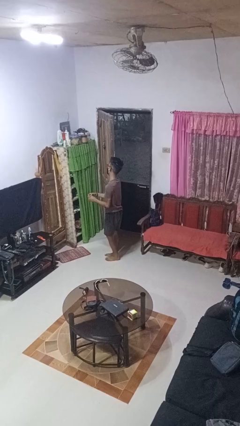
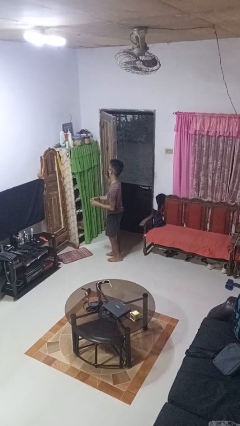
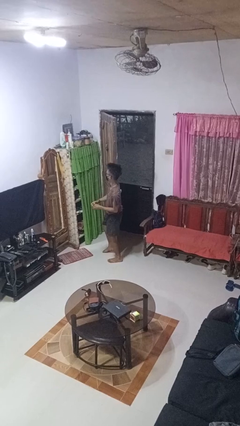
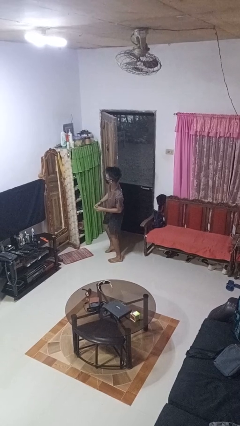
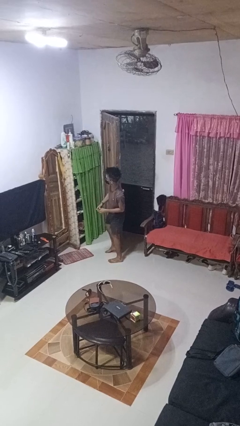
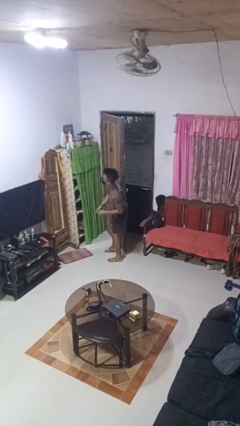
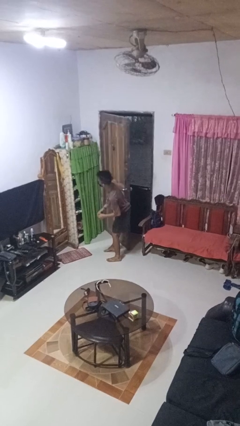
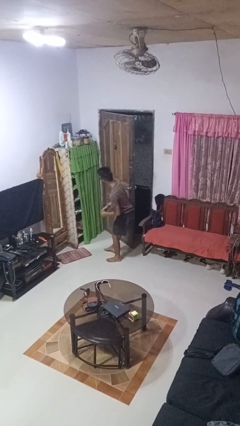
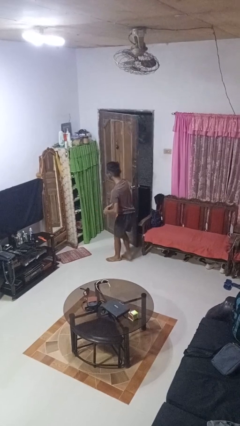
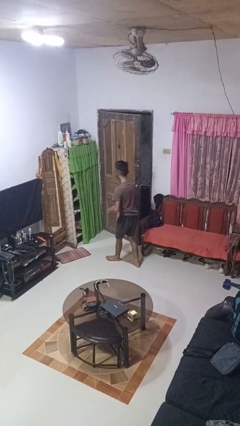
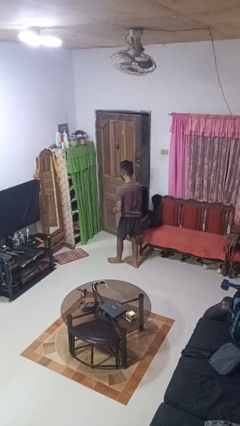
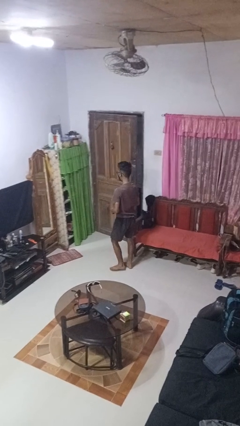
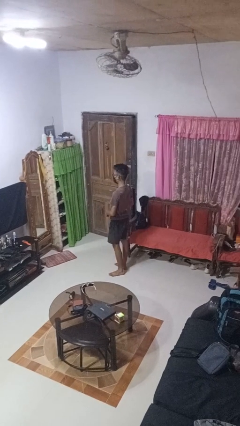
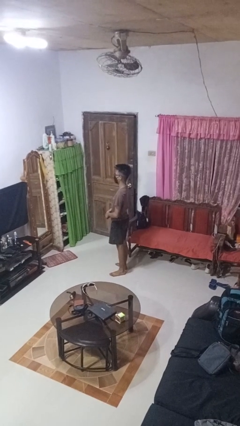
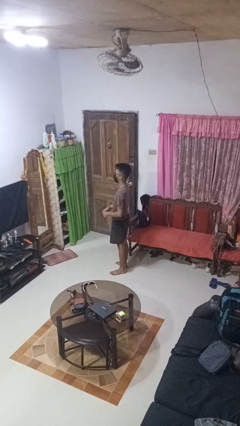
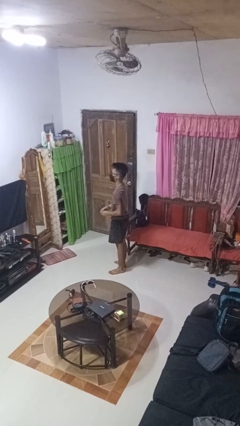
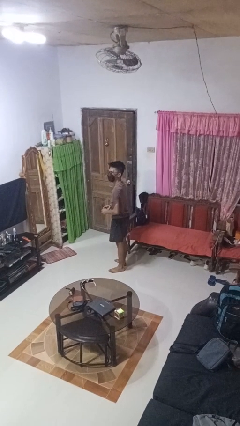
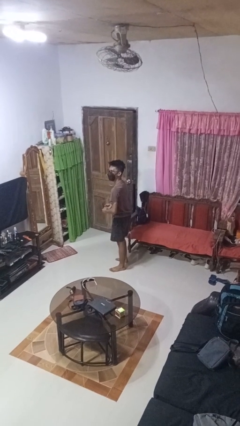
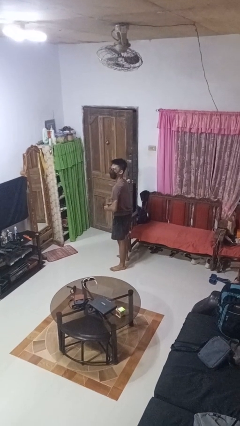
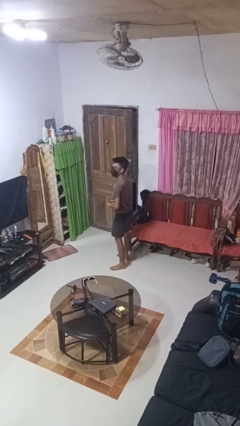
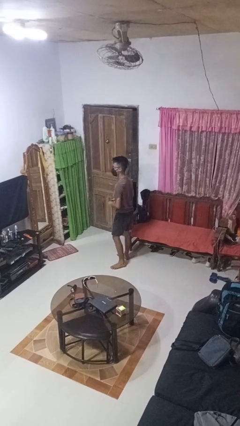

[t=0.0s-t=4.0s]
person closes door with hip

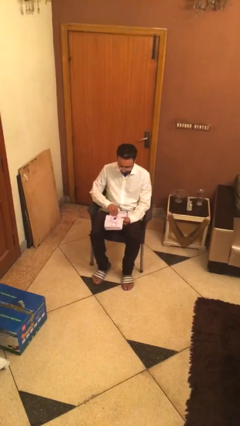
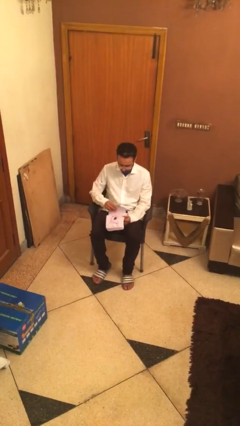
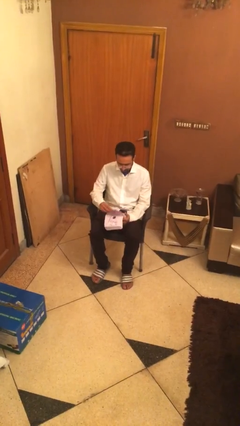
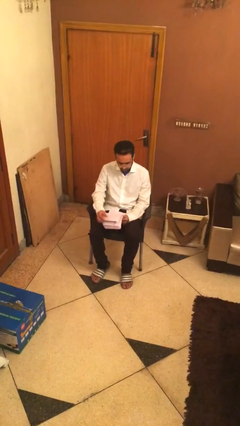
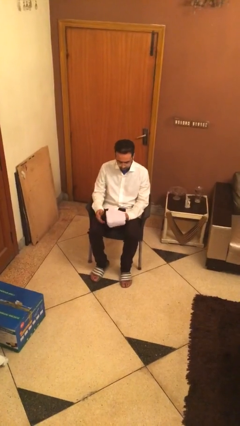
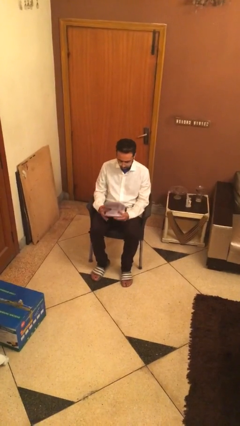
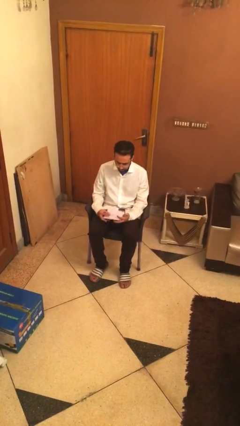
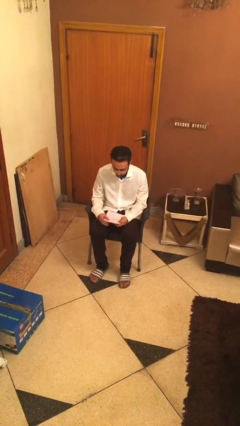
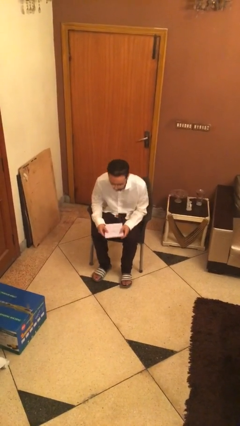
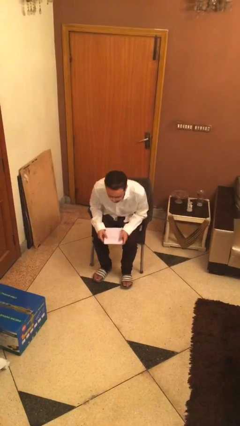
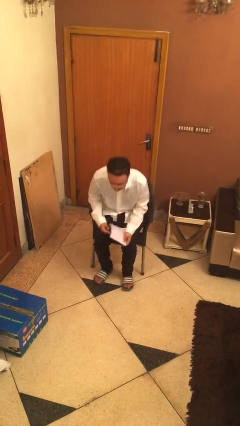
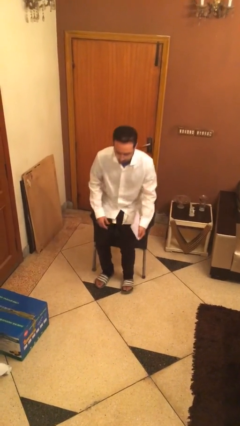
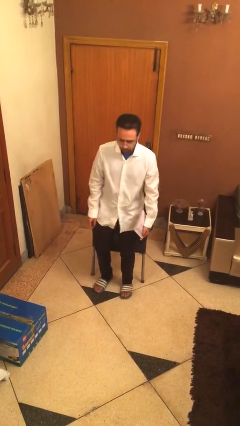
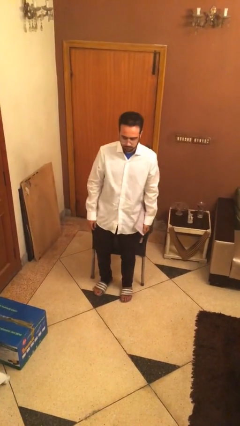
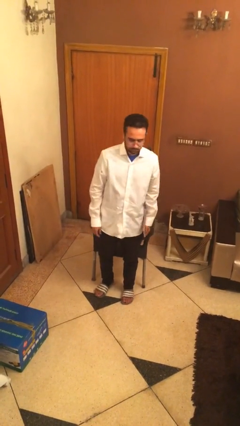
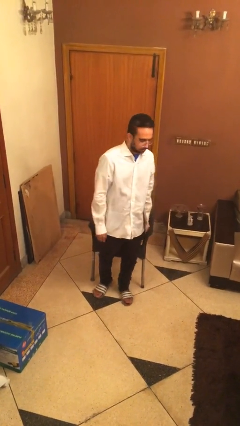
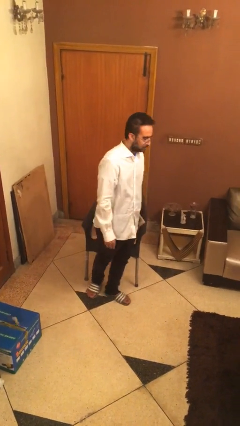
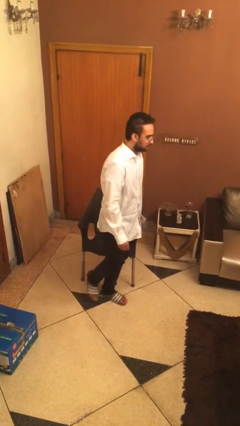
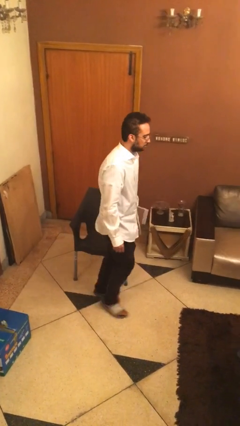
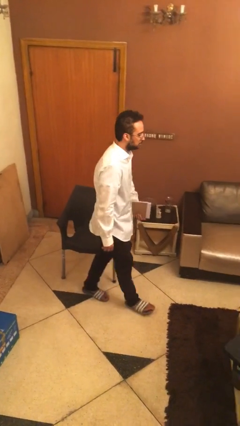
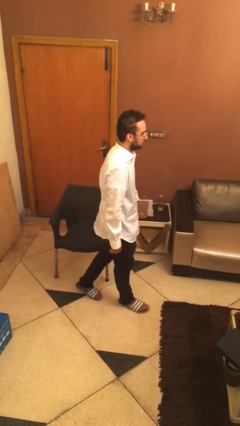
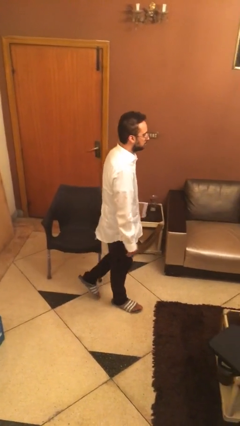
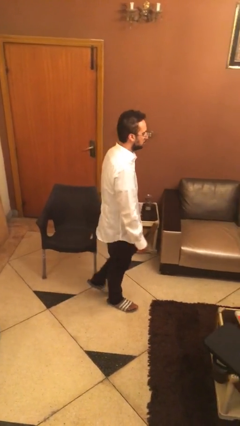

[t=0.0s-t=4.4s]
person stands up

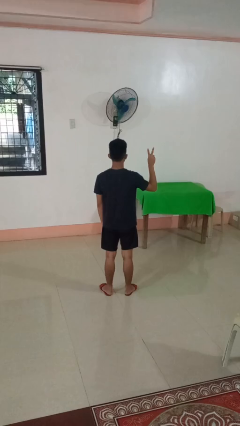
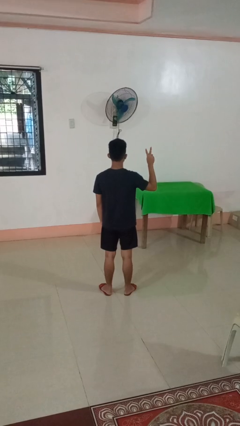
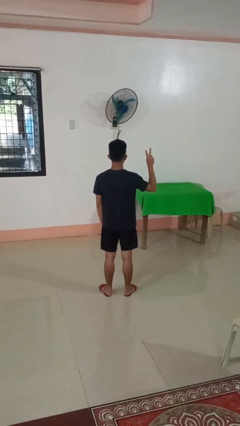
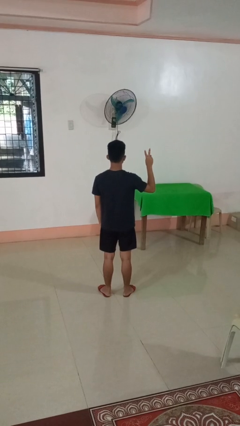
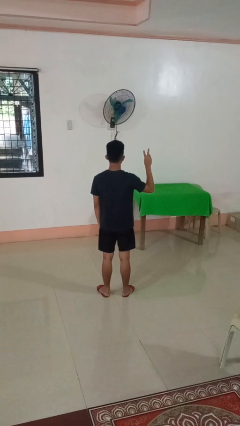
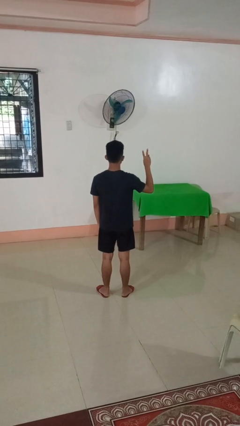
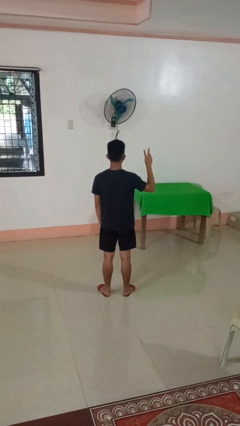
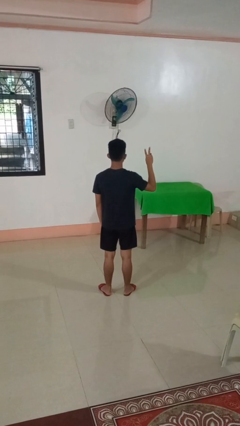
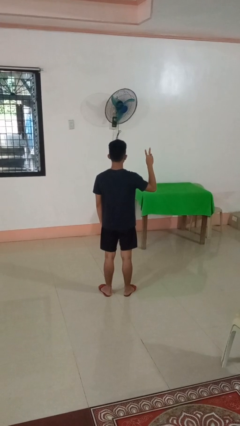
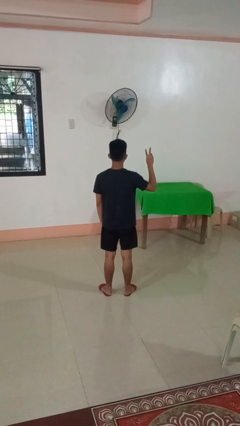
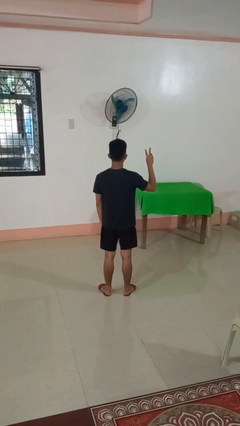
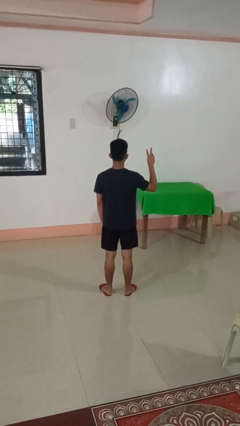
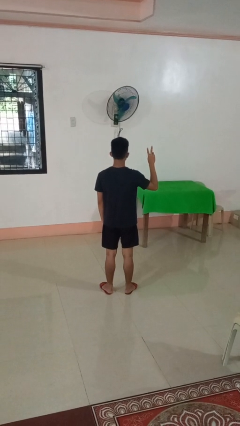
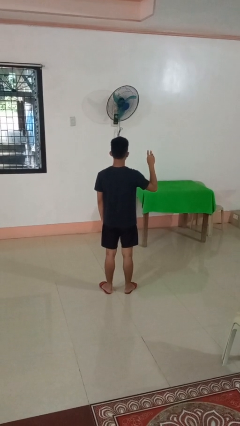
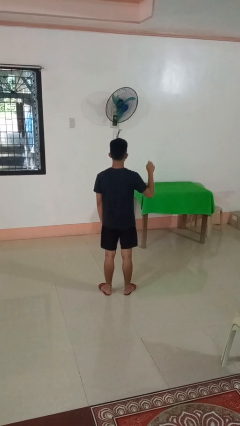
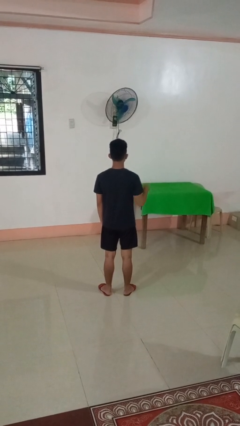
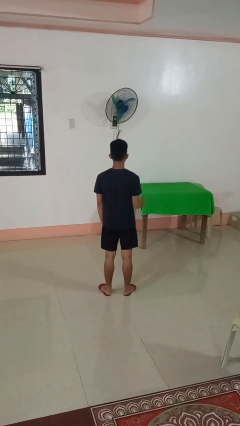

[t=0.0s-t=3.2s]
person gestures peace

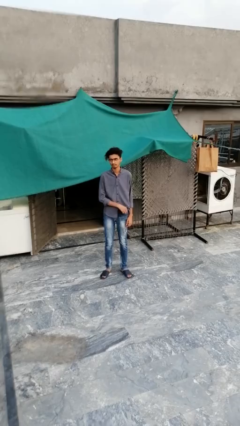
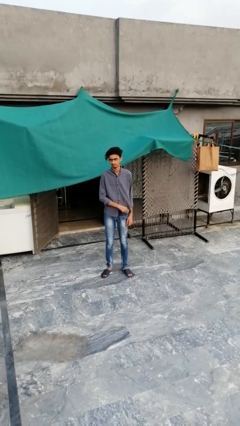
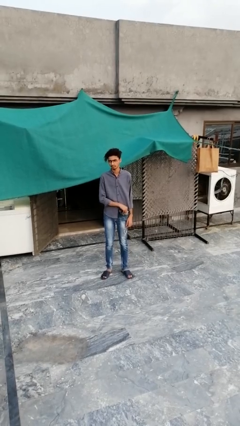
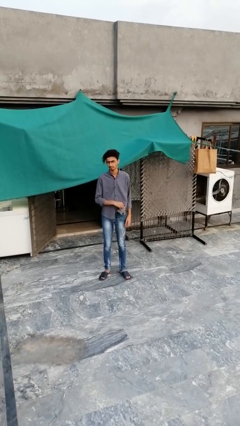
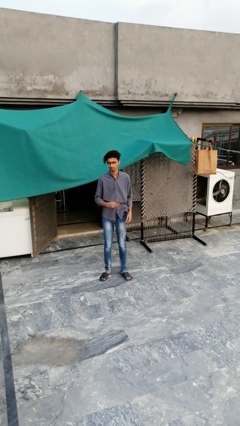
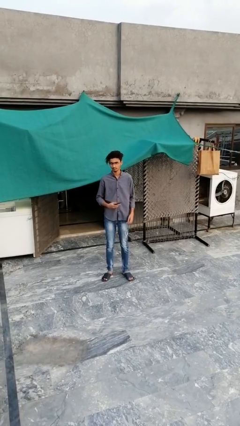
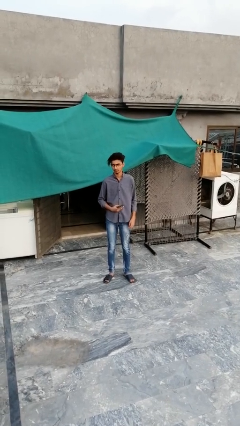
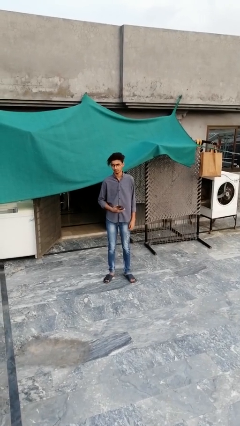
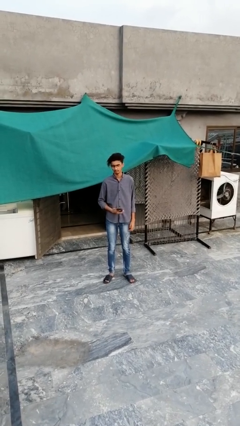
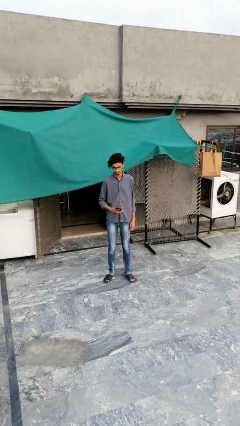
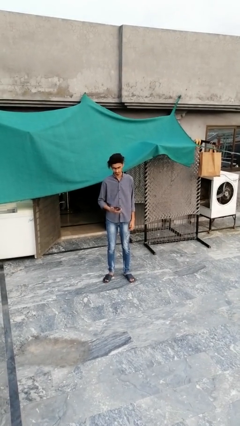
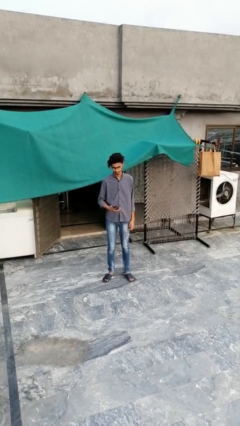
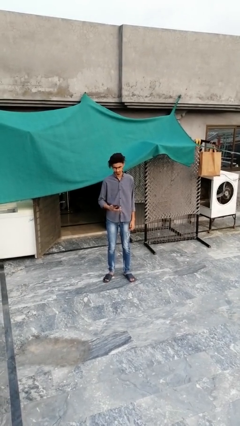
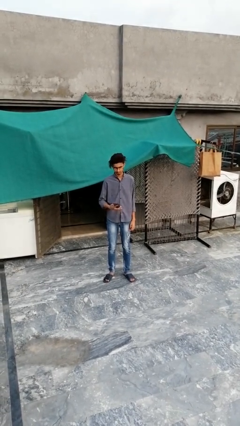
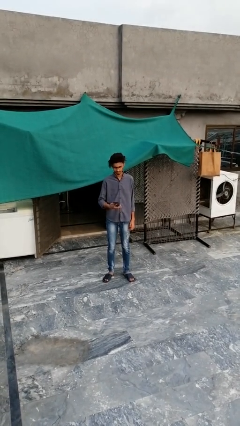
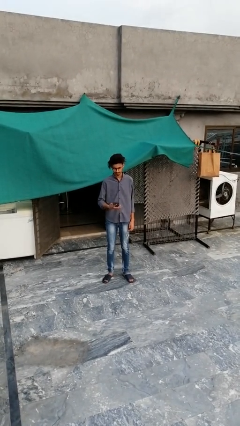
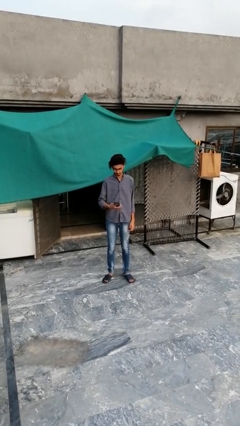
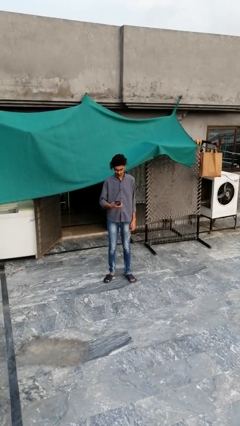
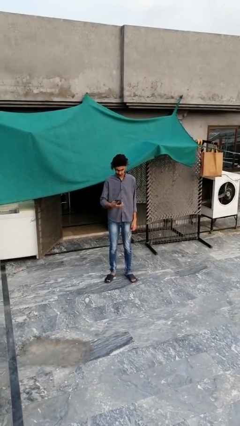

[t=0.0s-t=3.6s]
person takes phone from pocket

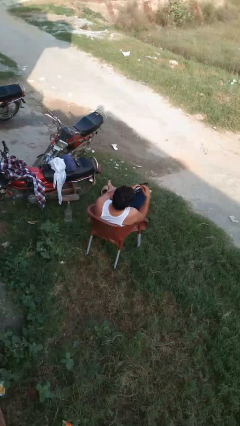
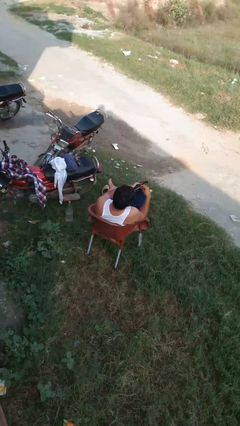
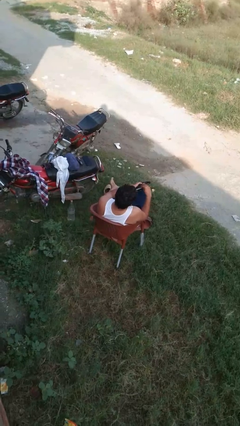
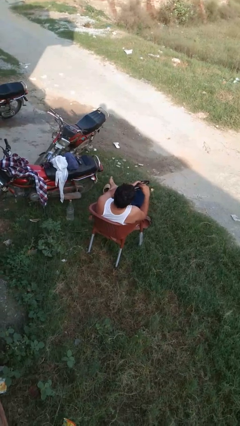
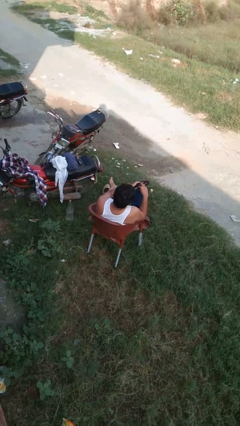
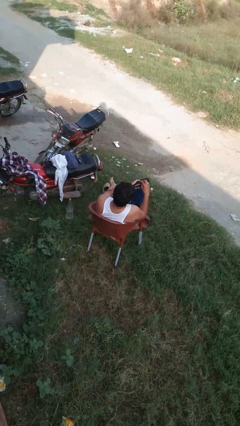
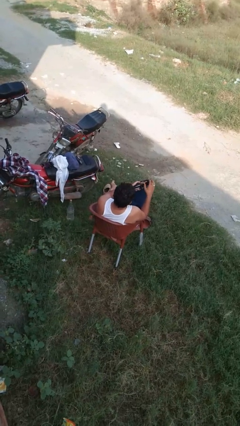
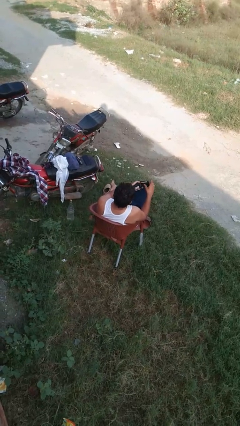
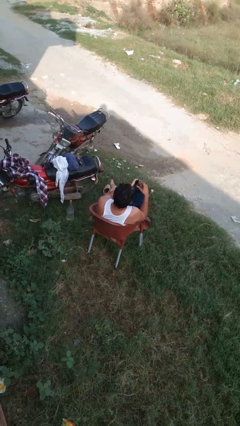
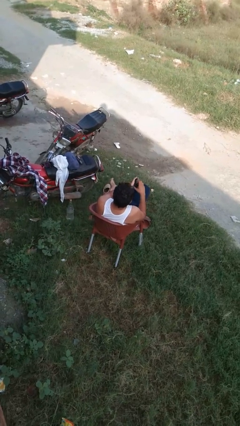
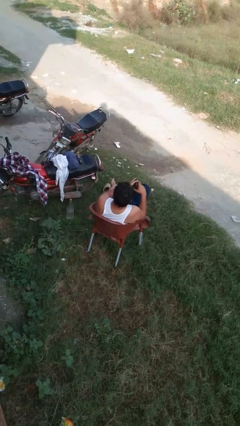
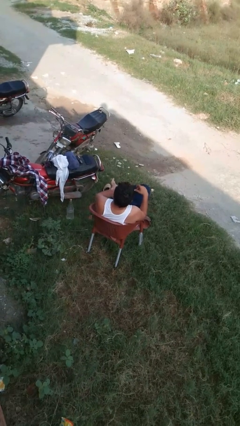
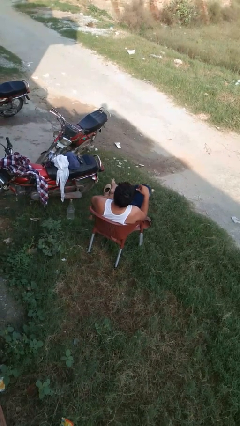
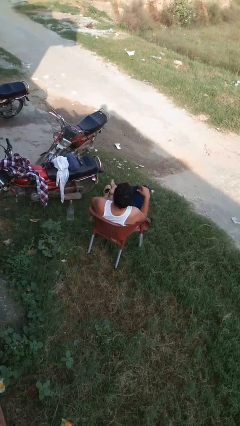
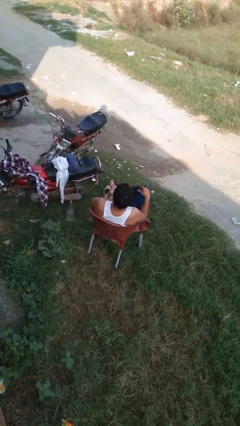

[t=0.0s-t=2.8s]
person puts object into purse
